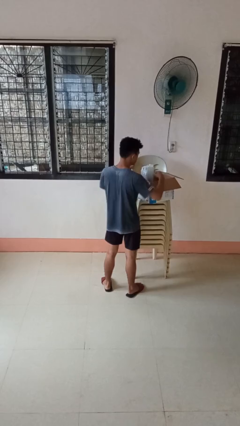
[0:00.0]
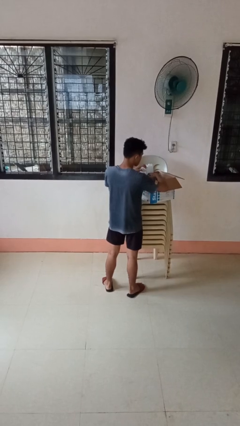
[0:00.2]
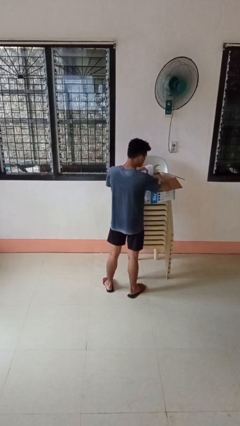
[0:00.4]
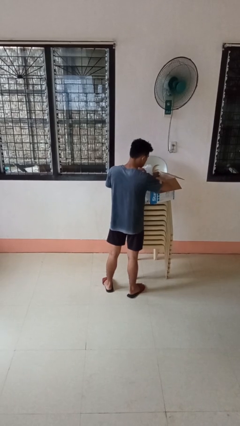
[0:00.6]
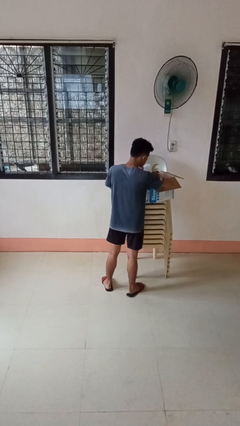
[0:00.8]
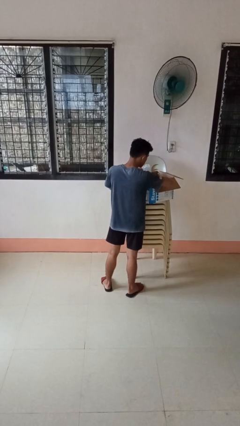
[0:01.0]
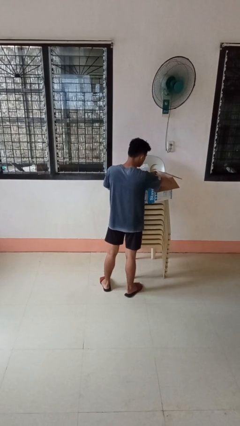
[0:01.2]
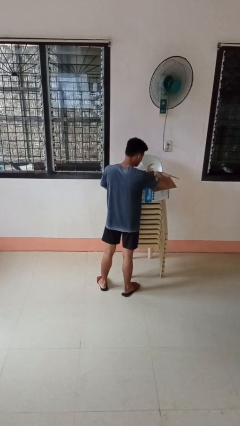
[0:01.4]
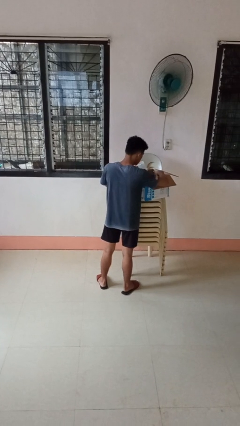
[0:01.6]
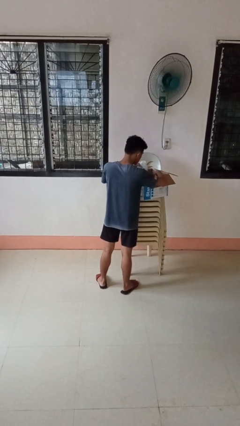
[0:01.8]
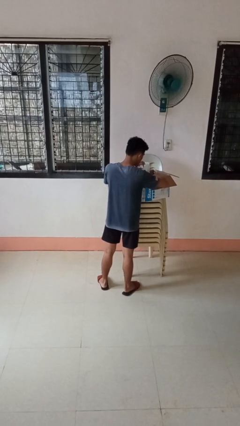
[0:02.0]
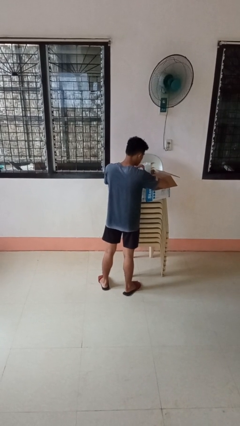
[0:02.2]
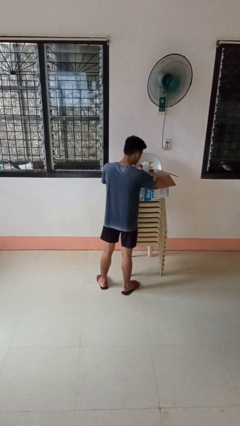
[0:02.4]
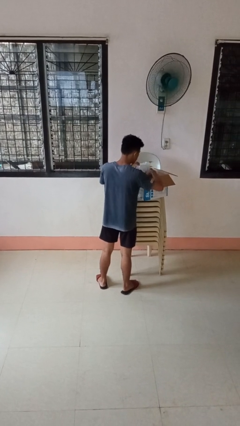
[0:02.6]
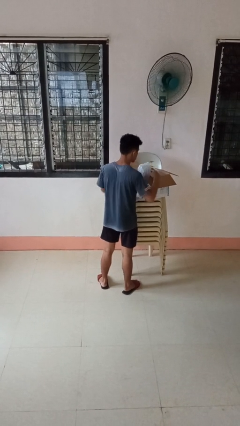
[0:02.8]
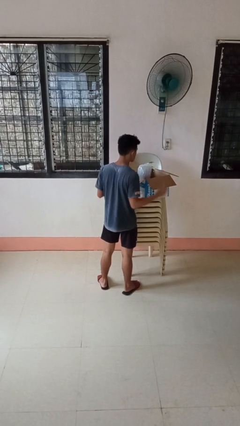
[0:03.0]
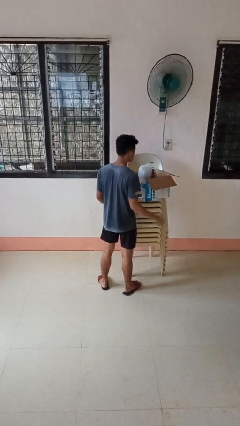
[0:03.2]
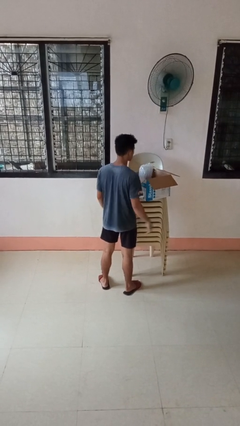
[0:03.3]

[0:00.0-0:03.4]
person searches in box

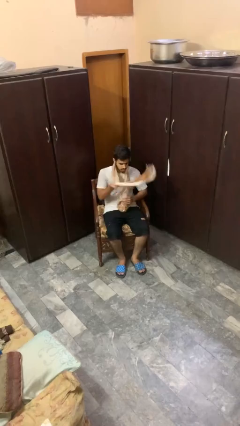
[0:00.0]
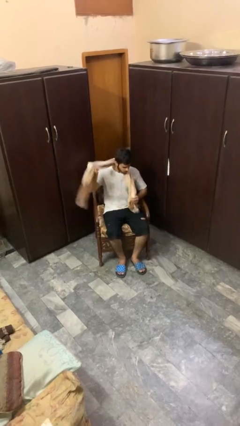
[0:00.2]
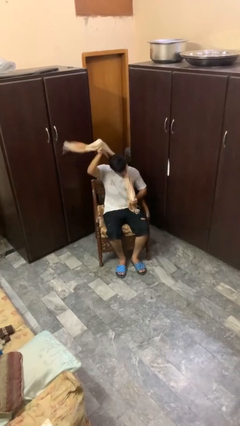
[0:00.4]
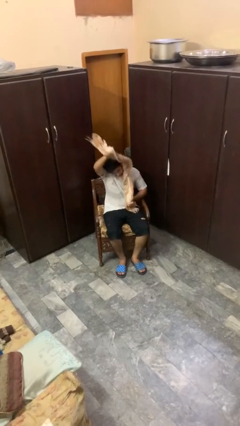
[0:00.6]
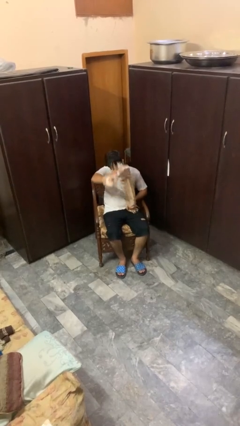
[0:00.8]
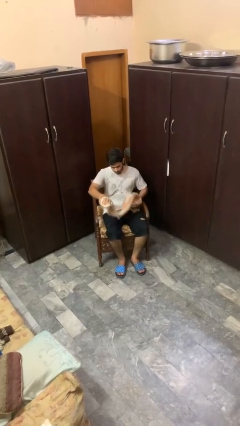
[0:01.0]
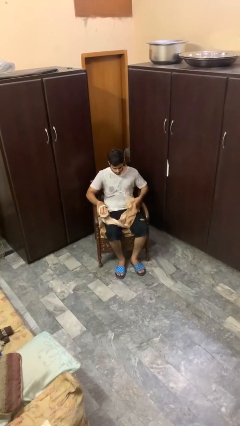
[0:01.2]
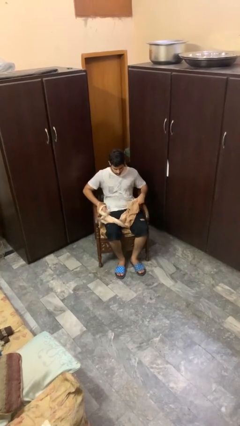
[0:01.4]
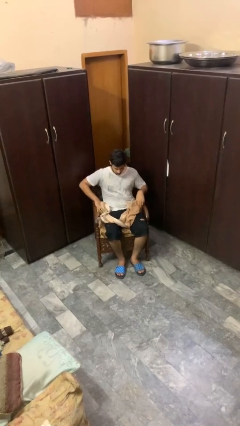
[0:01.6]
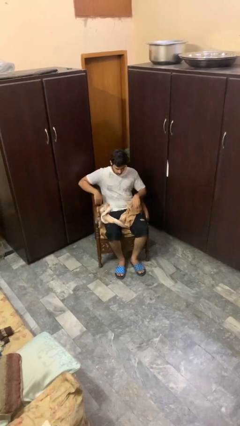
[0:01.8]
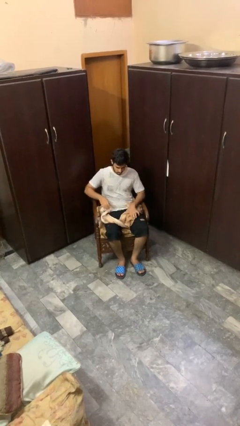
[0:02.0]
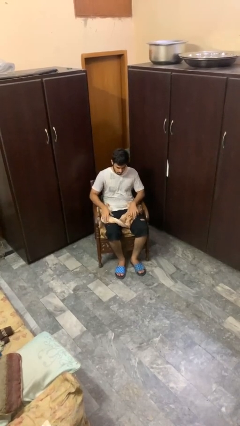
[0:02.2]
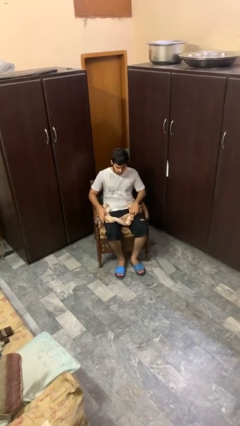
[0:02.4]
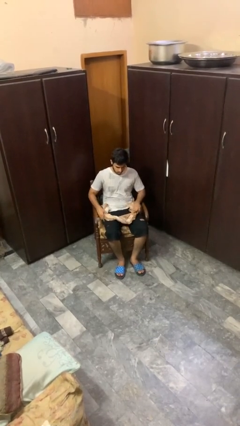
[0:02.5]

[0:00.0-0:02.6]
person takes off scarf

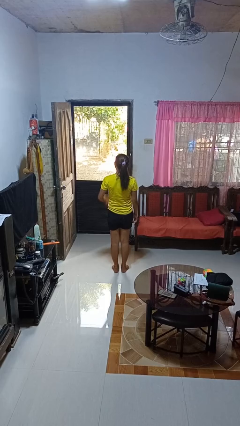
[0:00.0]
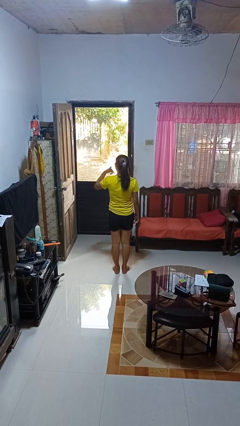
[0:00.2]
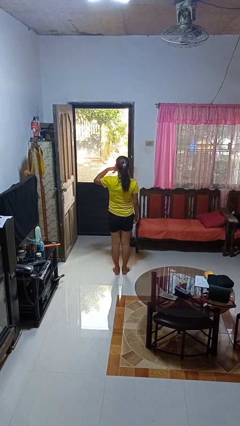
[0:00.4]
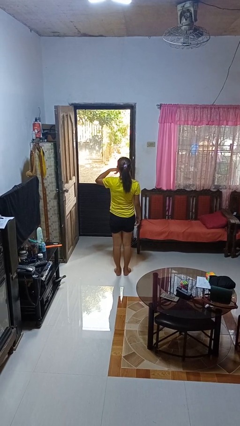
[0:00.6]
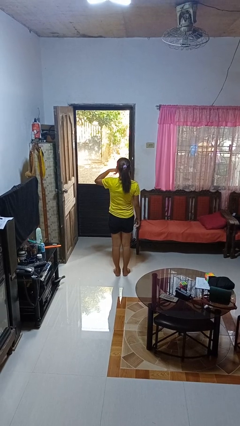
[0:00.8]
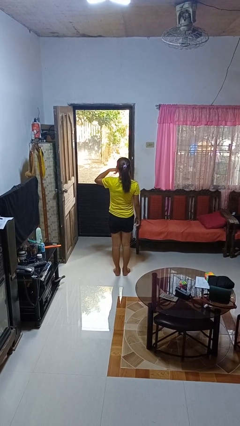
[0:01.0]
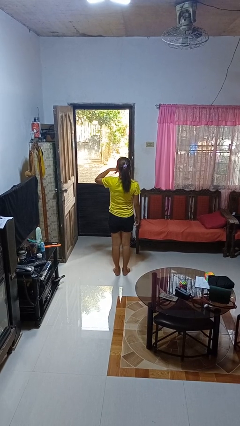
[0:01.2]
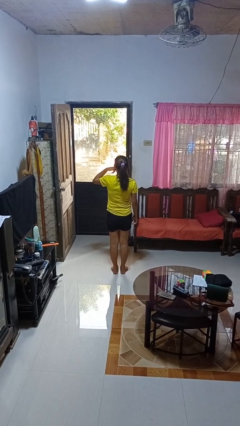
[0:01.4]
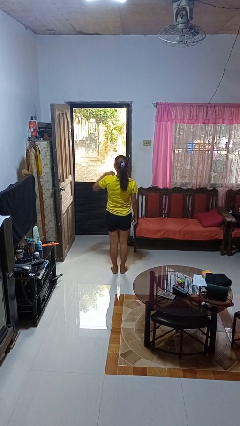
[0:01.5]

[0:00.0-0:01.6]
person gestures call me

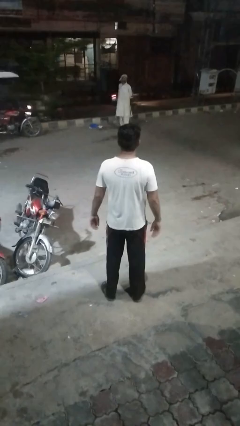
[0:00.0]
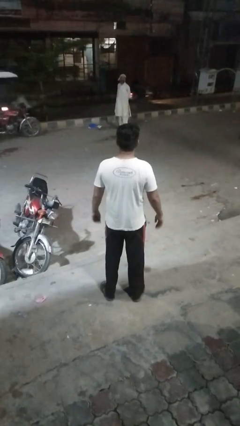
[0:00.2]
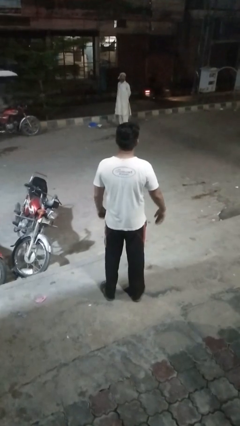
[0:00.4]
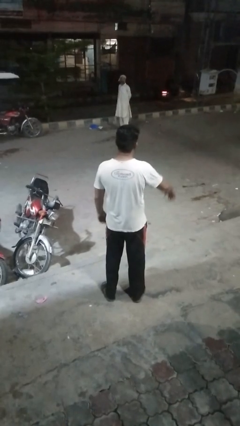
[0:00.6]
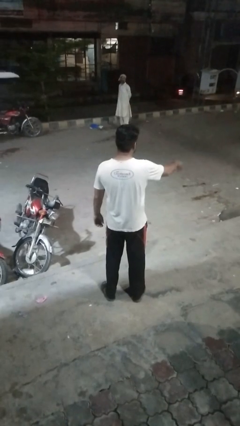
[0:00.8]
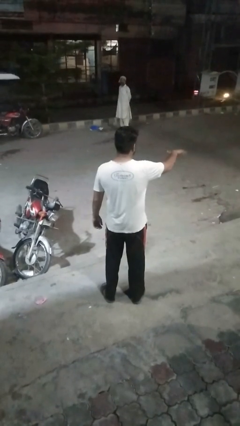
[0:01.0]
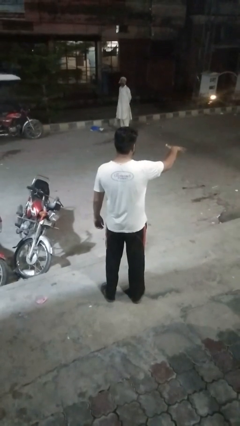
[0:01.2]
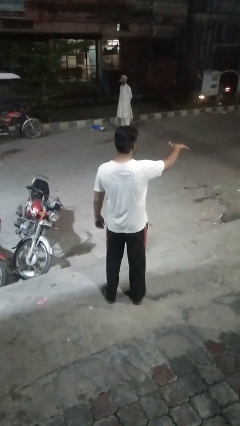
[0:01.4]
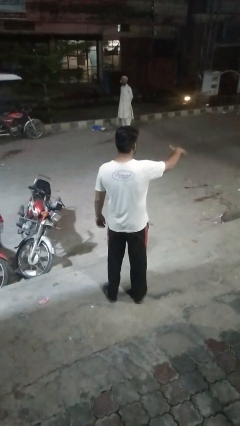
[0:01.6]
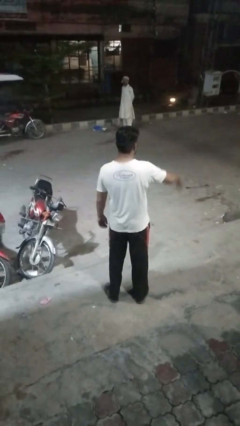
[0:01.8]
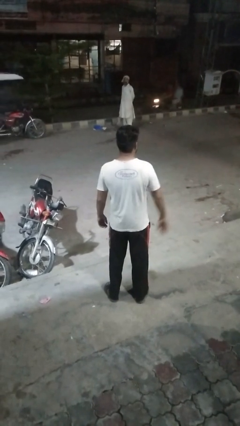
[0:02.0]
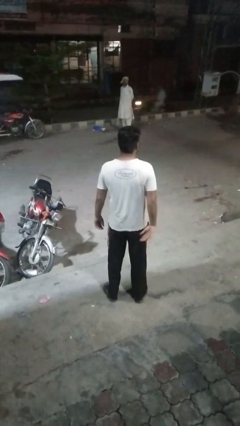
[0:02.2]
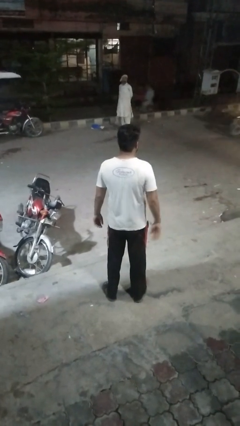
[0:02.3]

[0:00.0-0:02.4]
person gestures hang loose

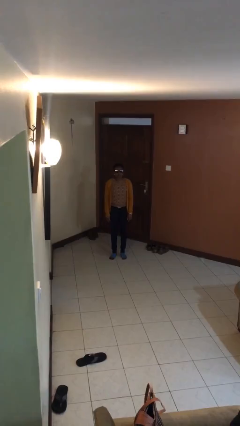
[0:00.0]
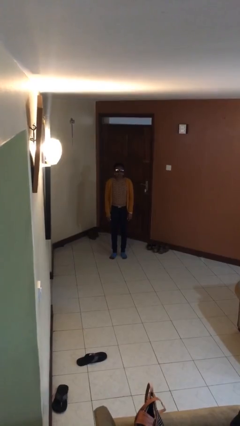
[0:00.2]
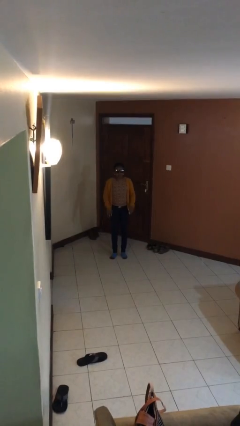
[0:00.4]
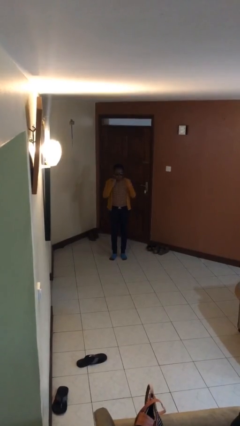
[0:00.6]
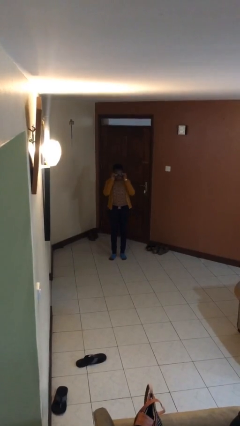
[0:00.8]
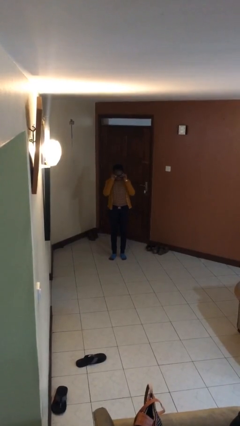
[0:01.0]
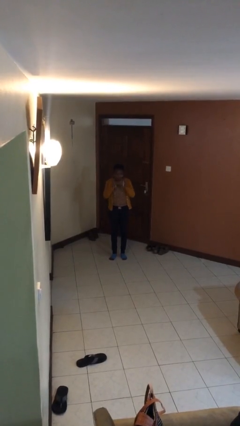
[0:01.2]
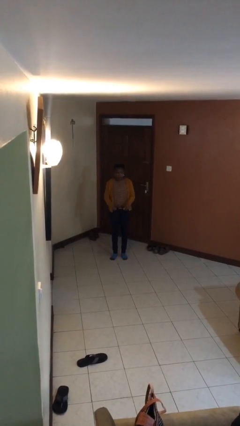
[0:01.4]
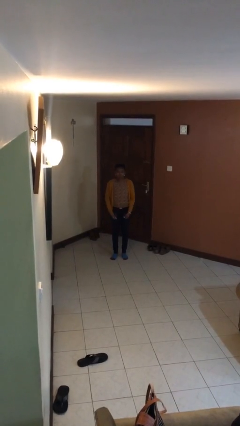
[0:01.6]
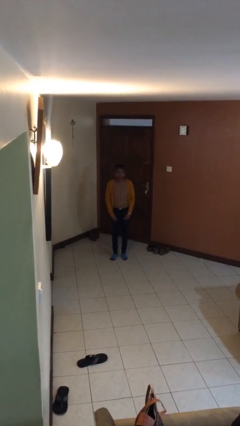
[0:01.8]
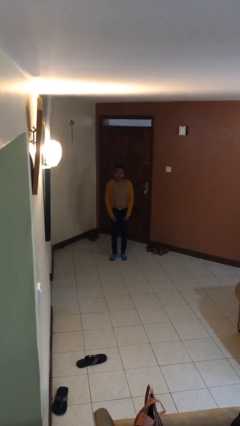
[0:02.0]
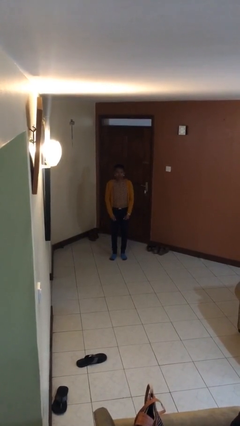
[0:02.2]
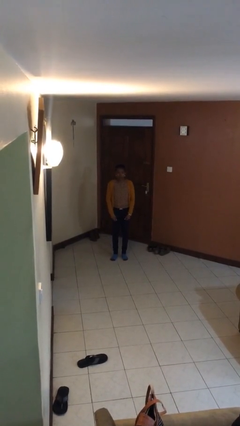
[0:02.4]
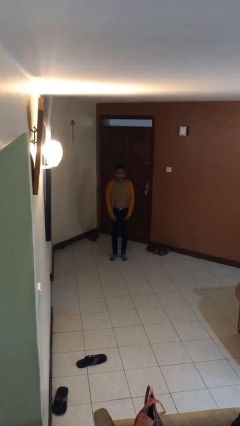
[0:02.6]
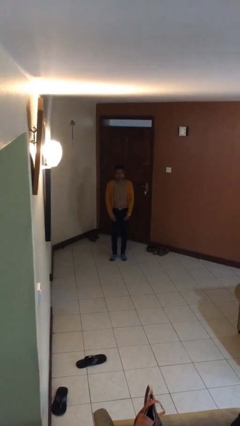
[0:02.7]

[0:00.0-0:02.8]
person takes off sunglasses

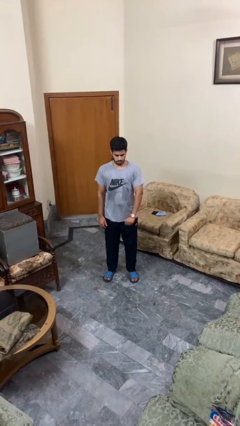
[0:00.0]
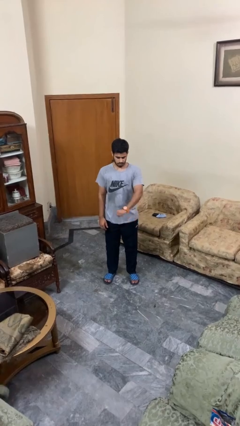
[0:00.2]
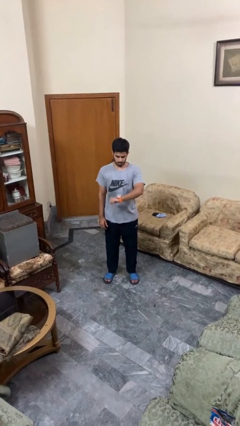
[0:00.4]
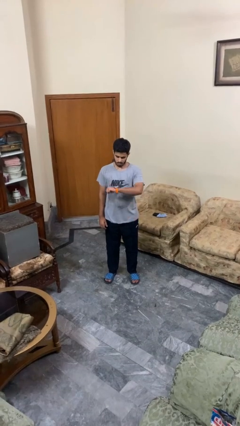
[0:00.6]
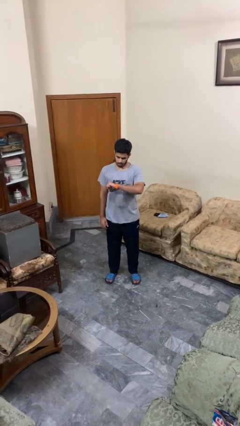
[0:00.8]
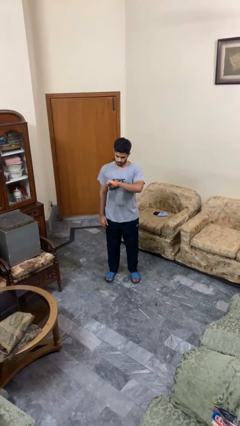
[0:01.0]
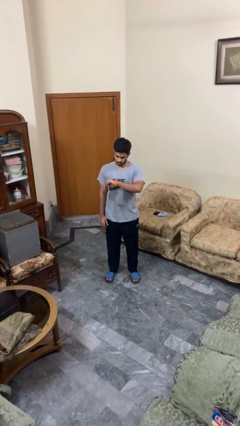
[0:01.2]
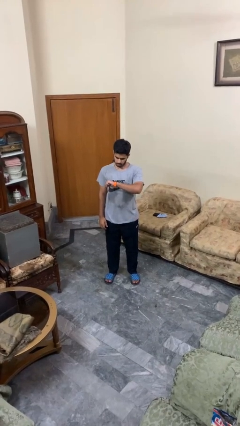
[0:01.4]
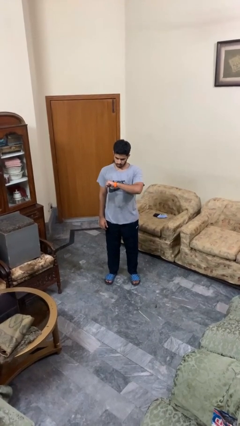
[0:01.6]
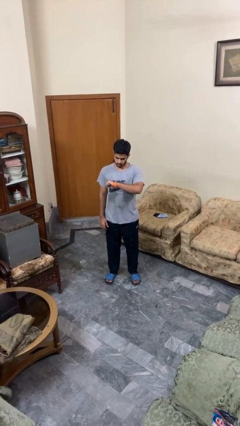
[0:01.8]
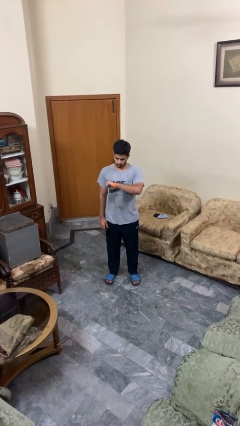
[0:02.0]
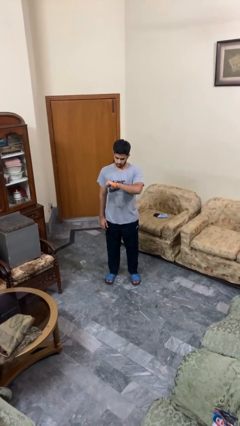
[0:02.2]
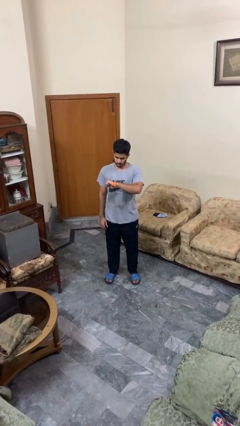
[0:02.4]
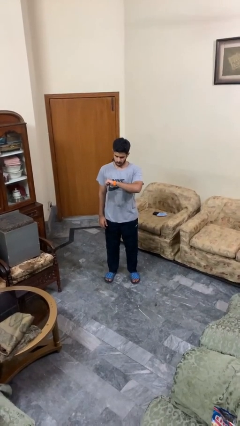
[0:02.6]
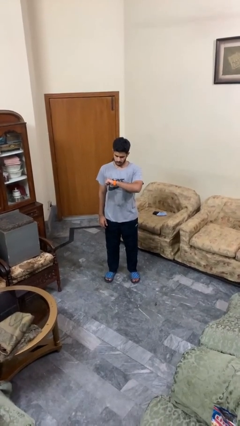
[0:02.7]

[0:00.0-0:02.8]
person looks at wristwatch

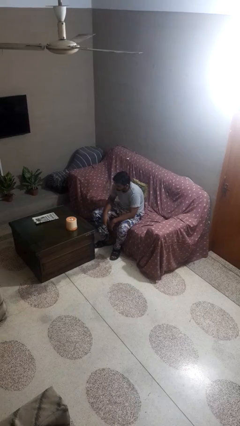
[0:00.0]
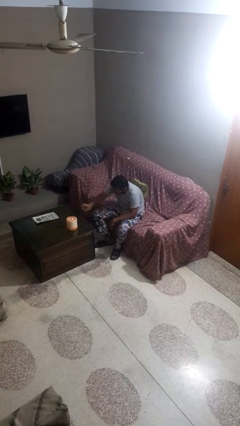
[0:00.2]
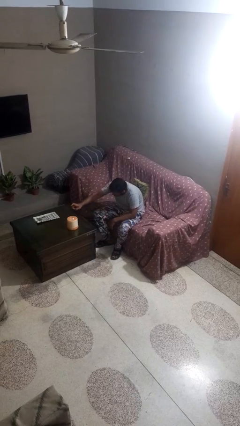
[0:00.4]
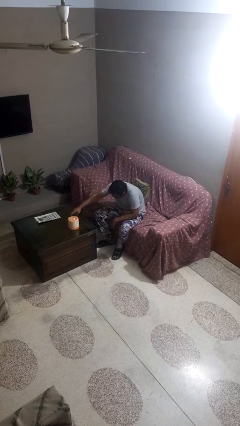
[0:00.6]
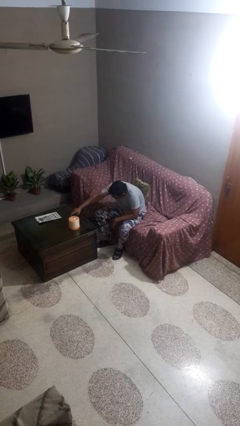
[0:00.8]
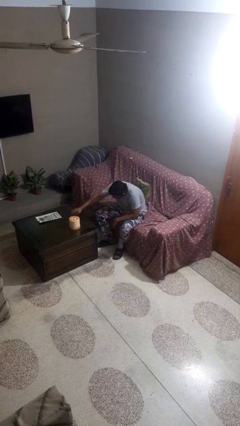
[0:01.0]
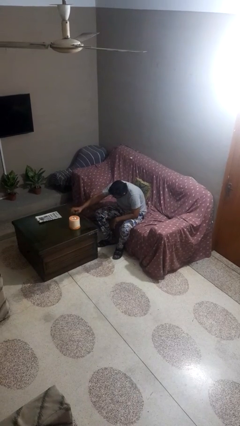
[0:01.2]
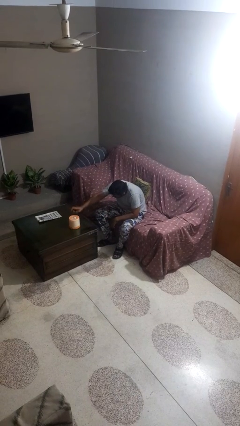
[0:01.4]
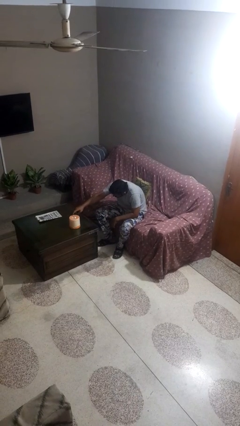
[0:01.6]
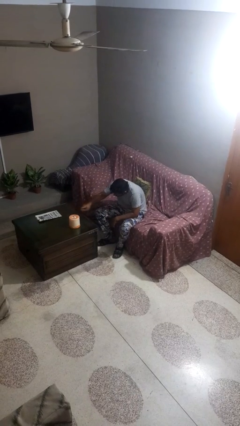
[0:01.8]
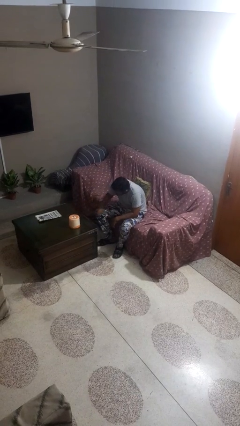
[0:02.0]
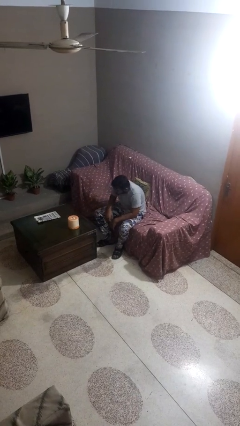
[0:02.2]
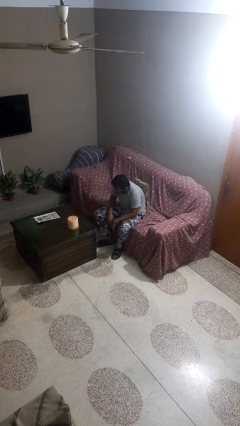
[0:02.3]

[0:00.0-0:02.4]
person taps object with finger
